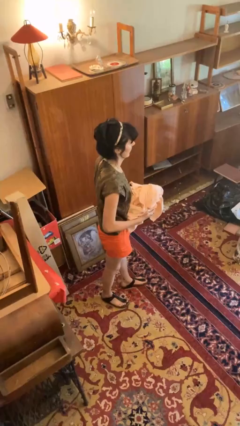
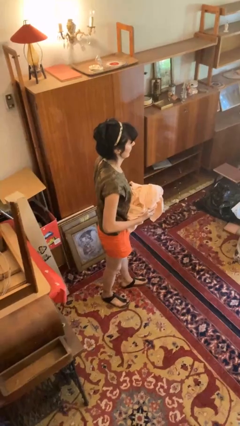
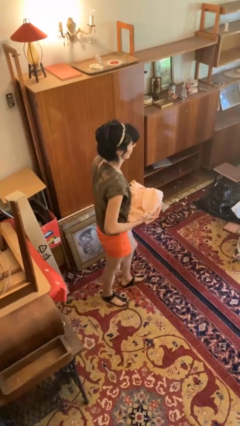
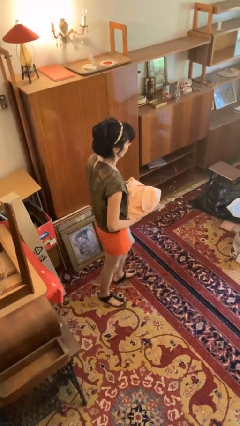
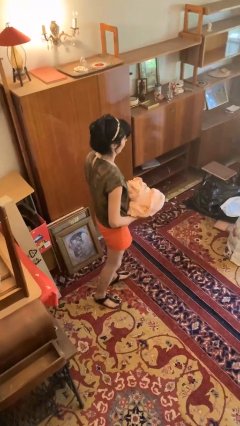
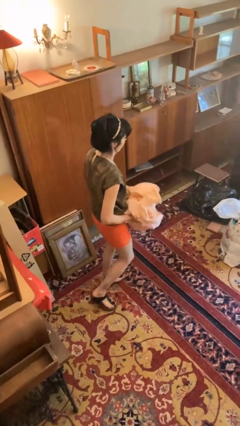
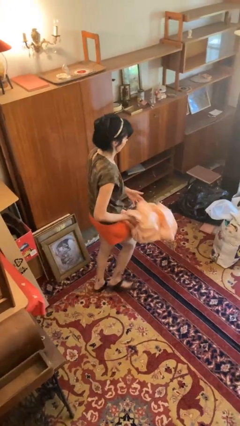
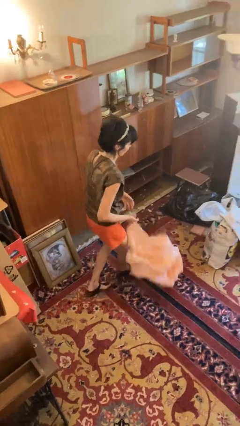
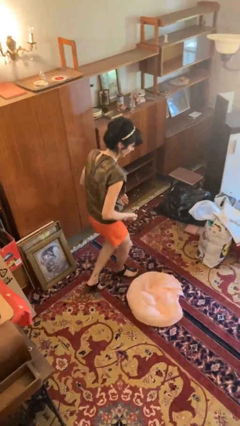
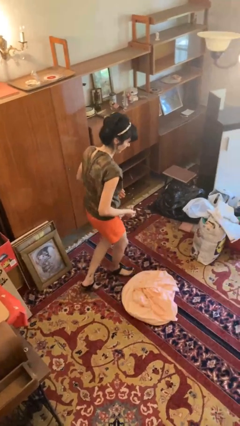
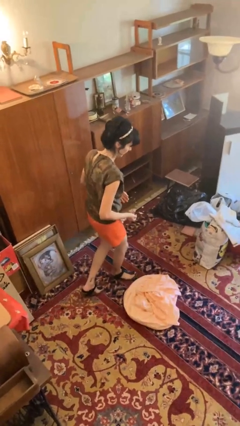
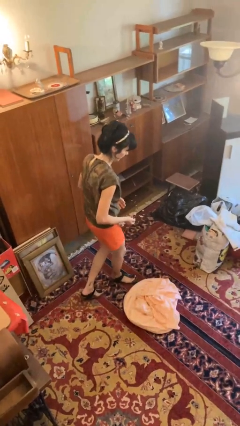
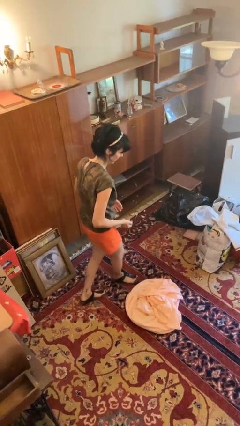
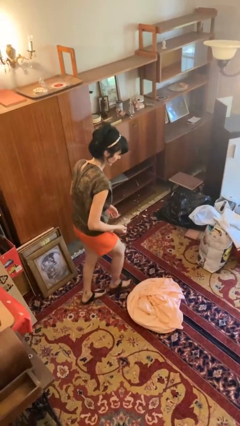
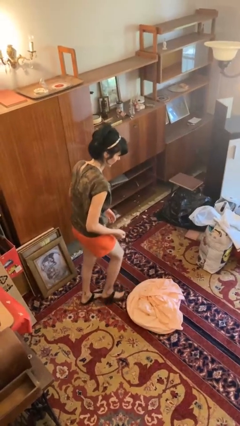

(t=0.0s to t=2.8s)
person drops object

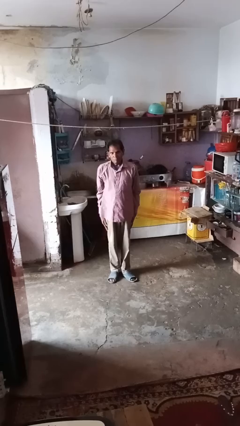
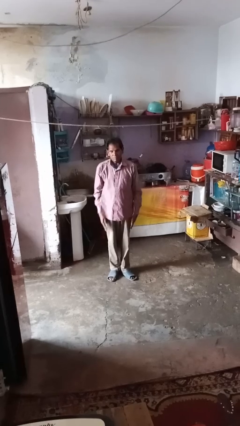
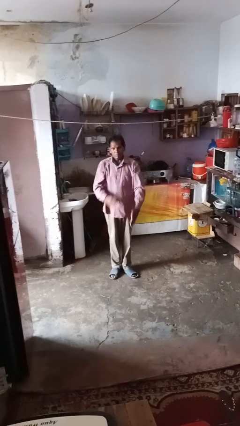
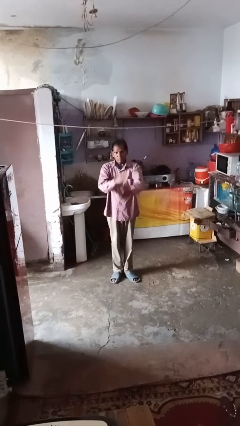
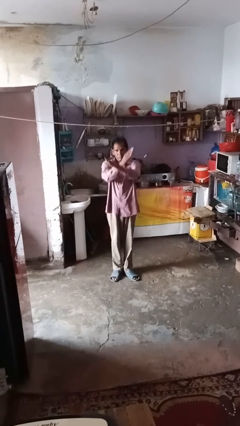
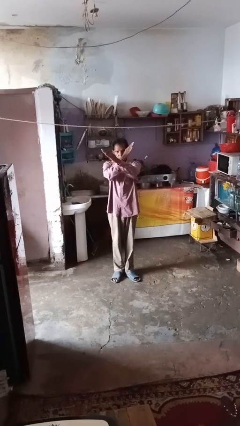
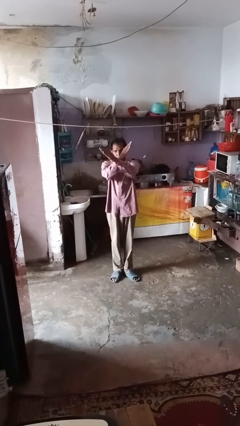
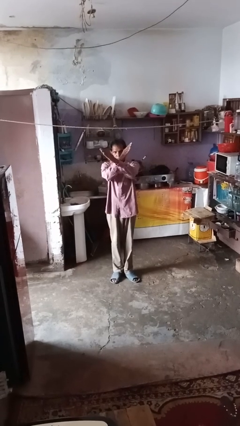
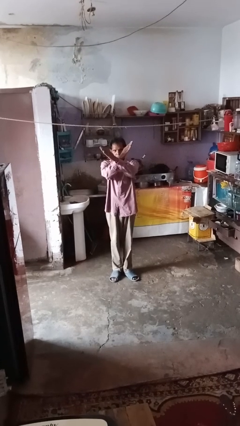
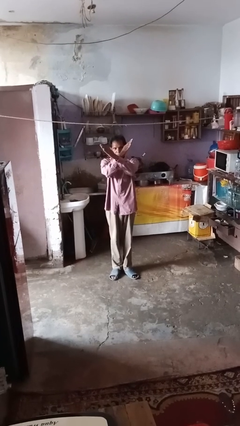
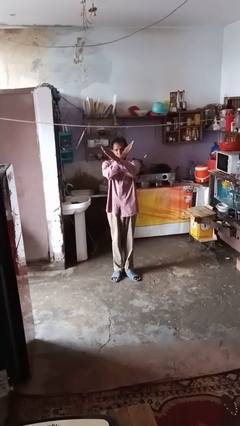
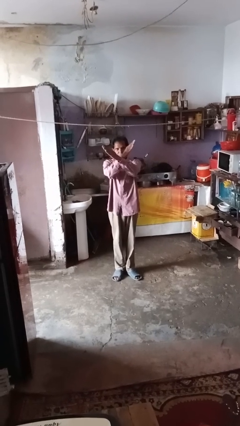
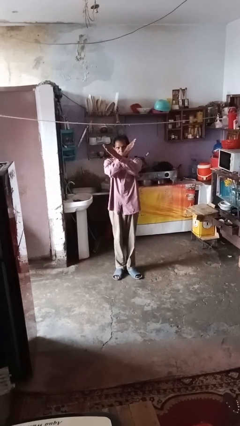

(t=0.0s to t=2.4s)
person gestures arms x

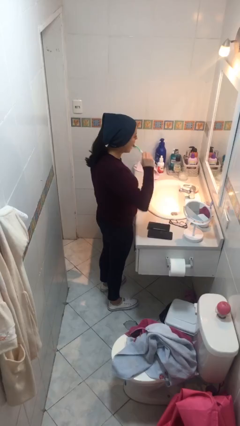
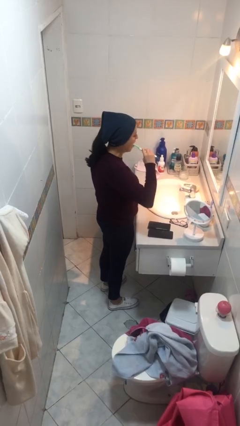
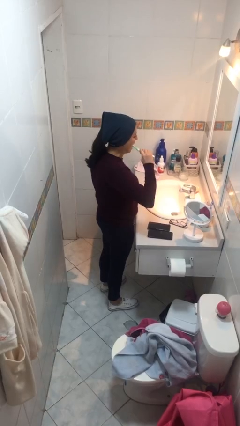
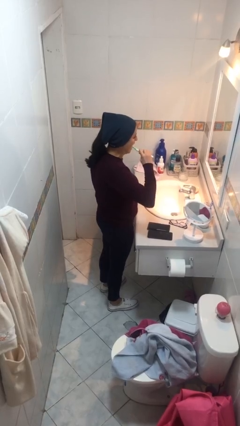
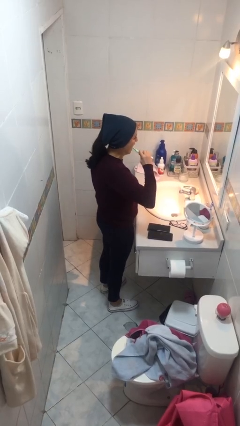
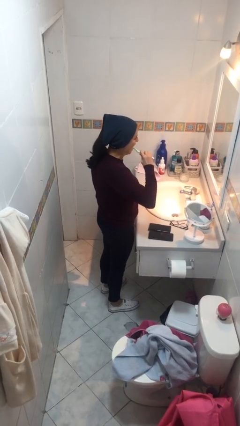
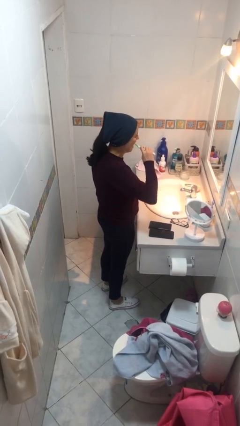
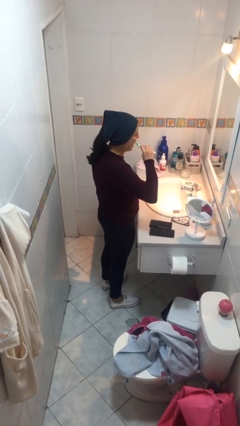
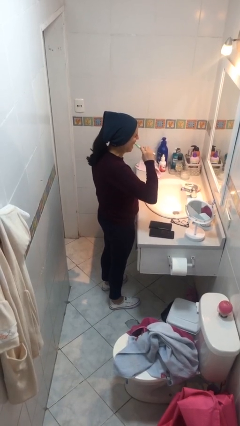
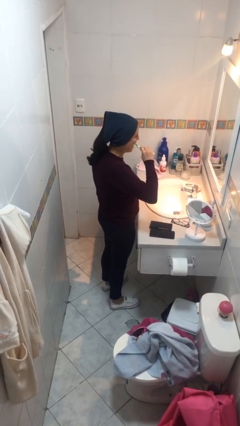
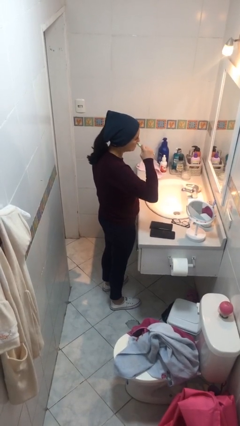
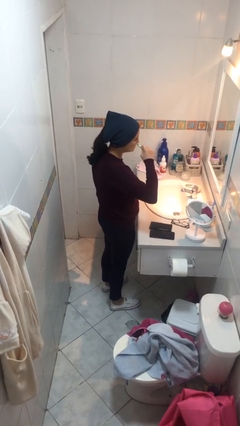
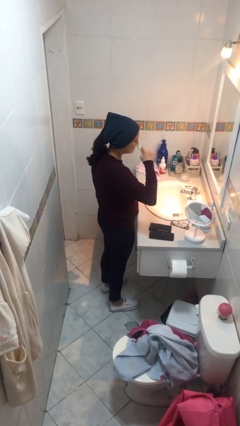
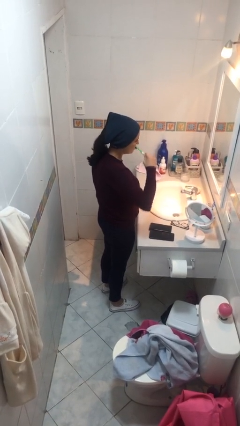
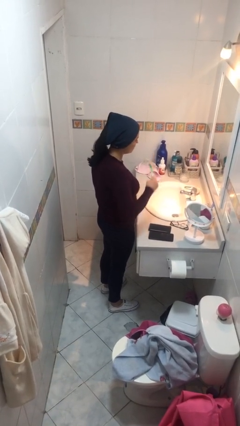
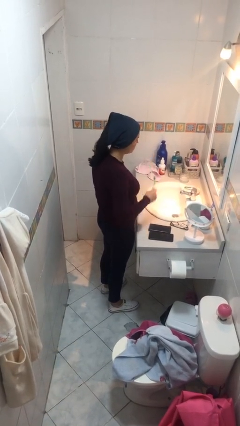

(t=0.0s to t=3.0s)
person brushes teeth

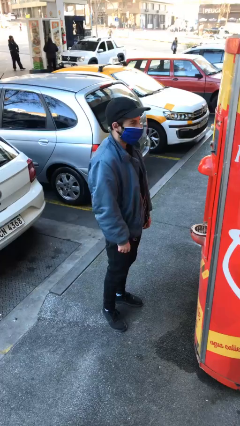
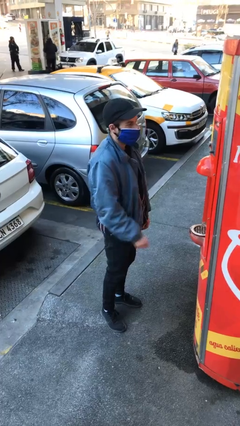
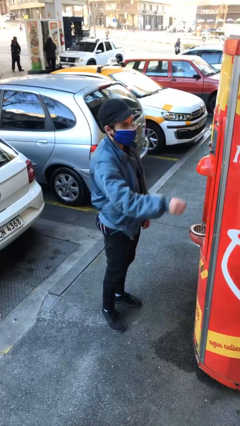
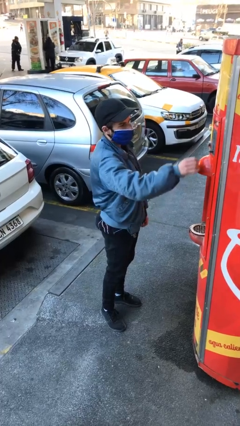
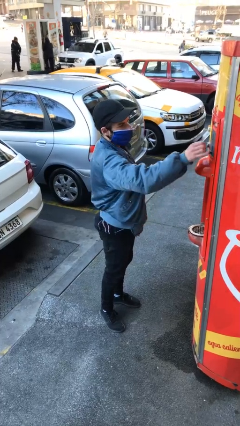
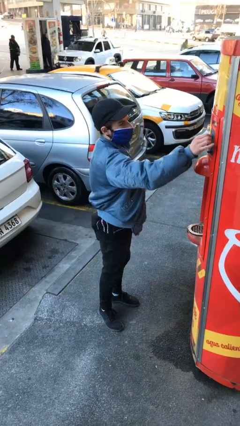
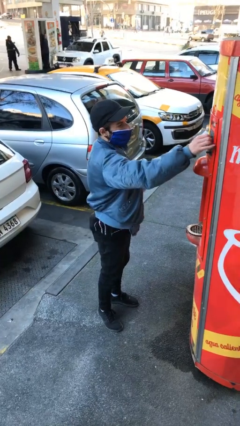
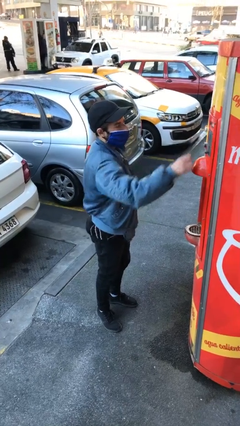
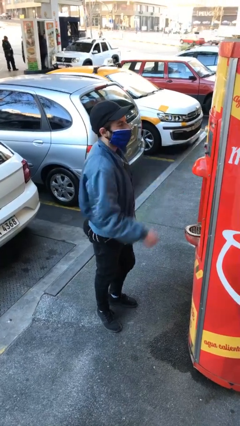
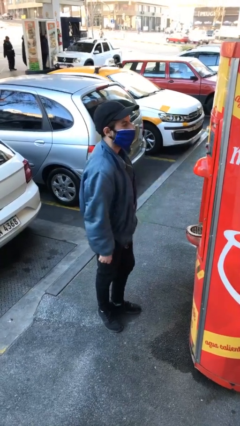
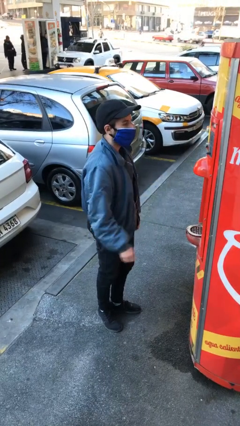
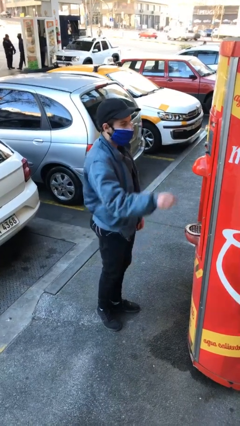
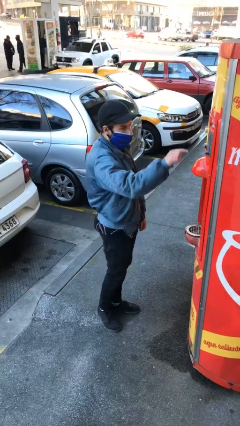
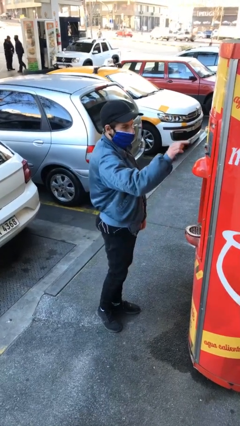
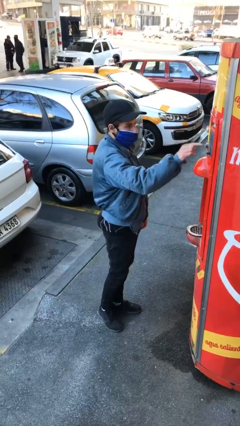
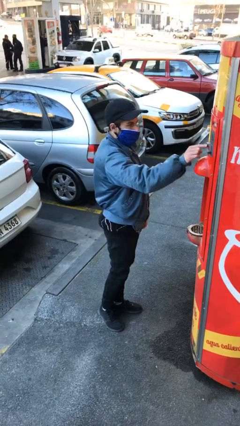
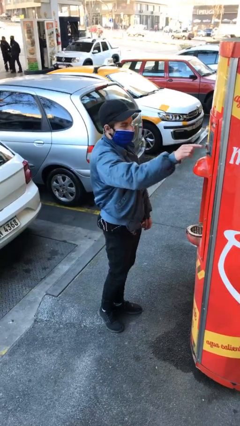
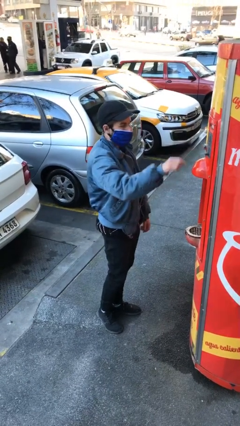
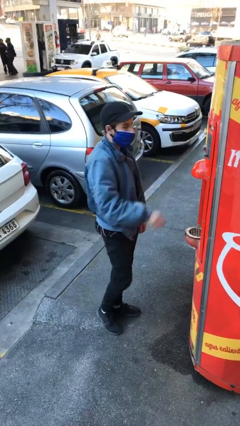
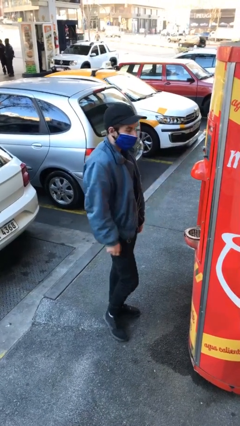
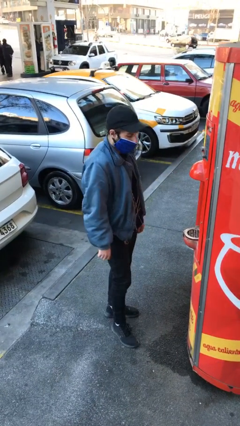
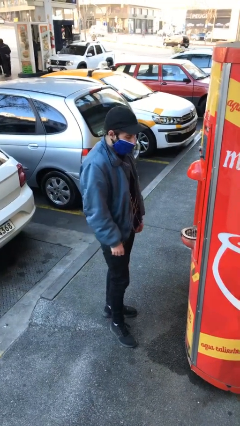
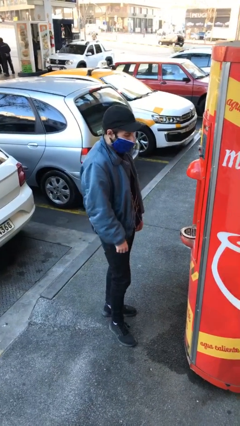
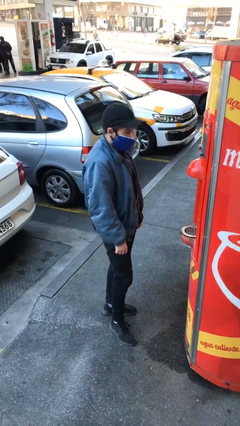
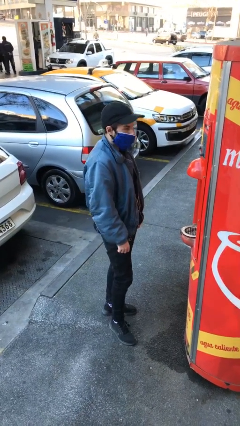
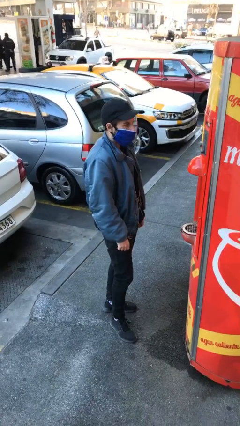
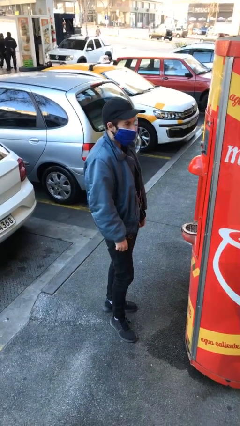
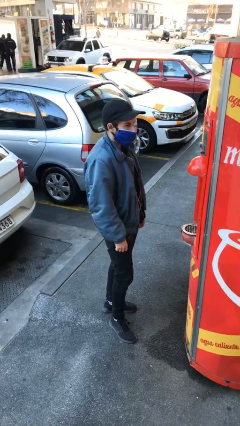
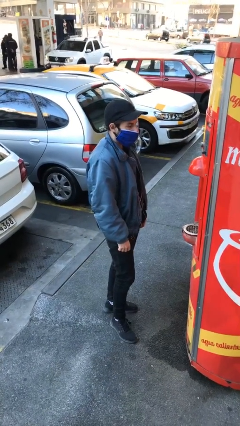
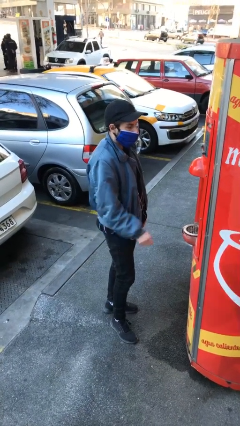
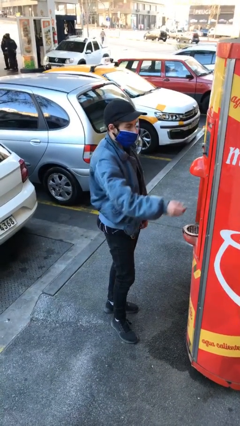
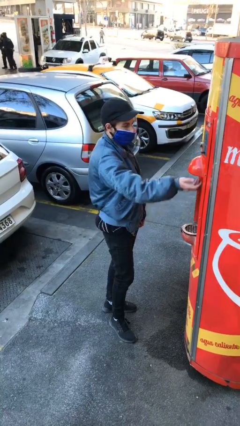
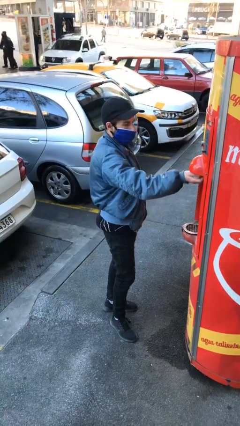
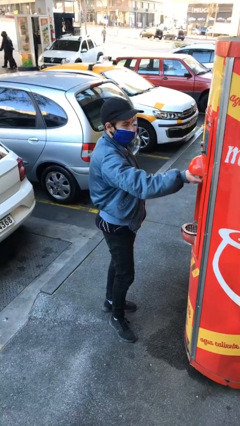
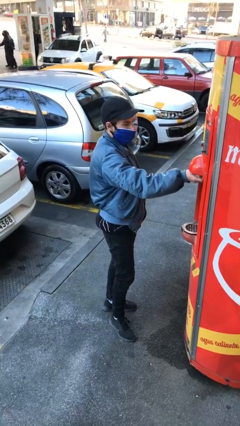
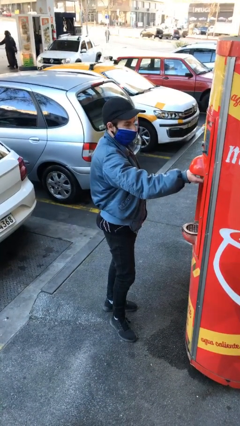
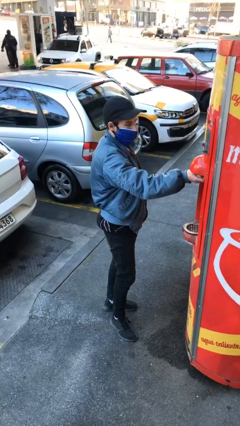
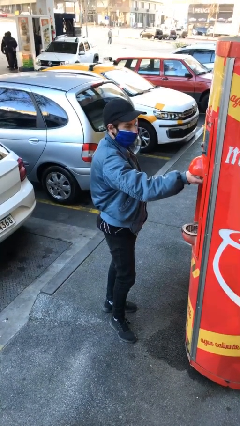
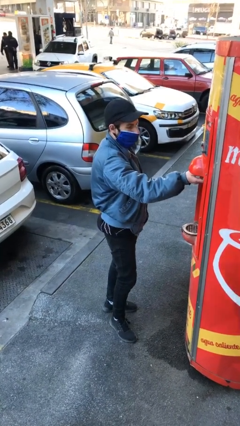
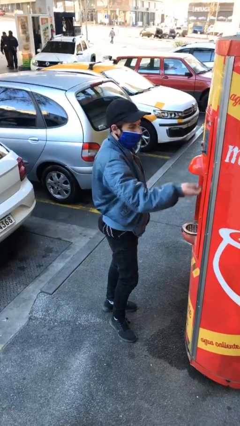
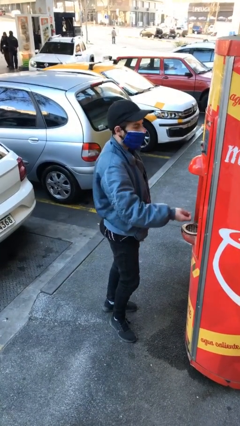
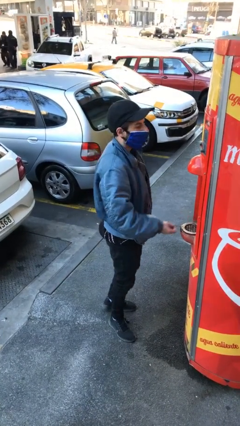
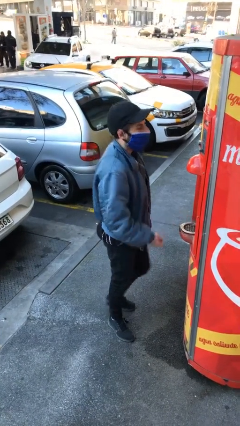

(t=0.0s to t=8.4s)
person purchases from machine

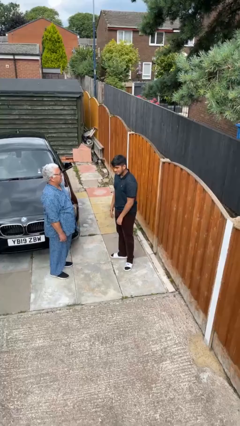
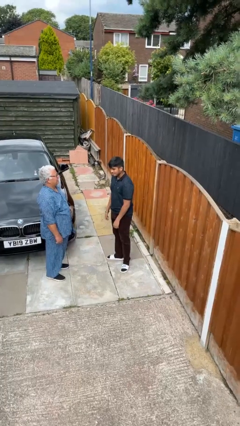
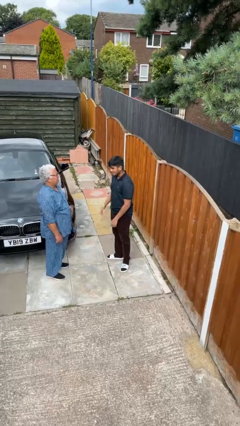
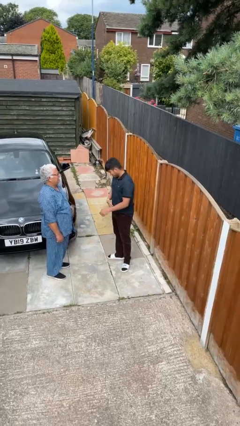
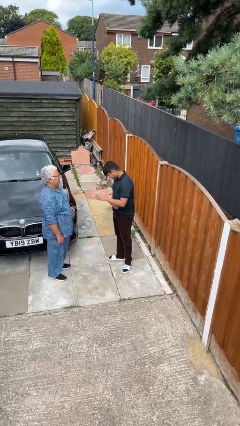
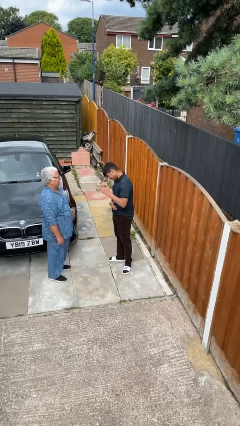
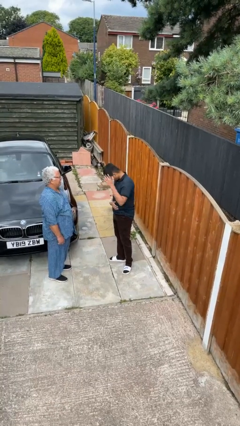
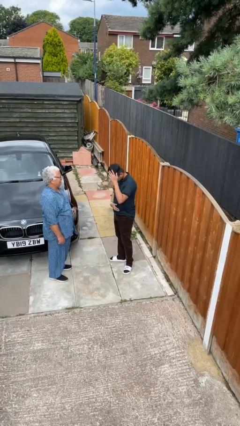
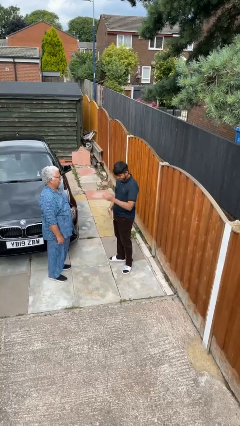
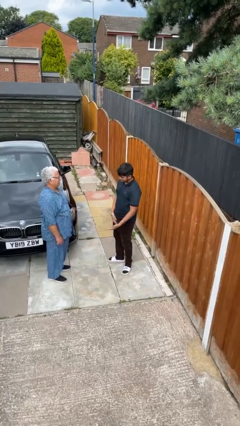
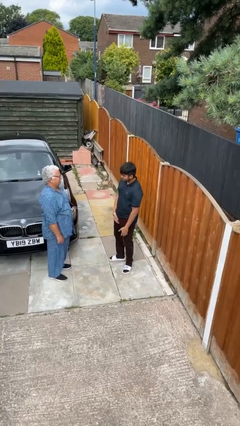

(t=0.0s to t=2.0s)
person laughs with person
